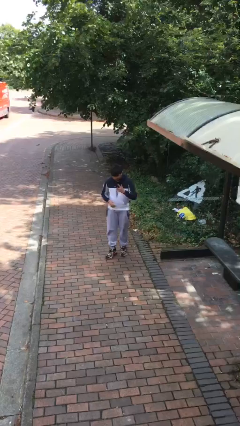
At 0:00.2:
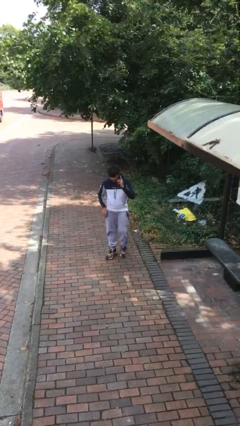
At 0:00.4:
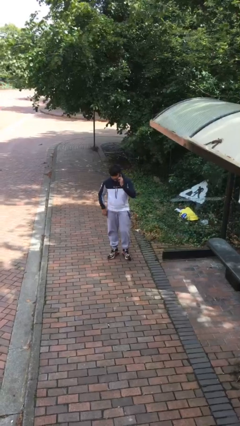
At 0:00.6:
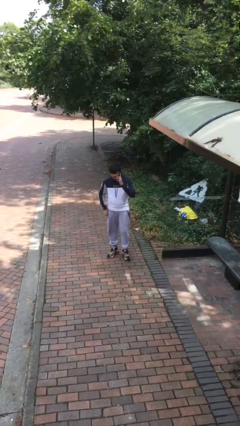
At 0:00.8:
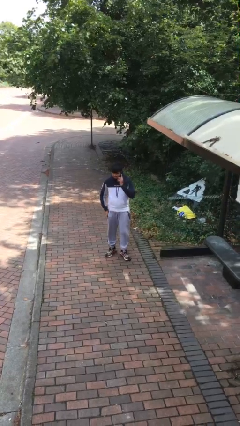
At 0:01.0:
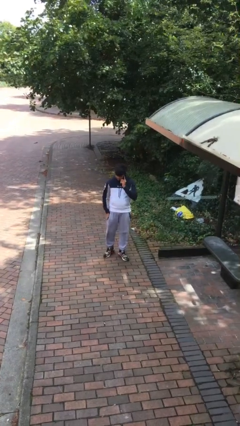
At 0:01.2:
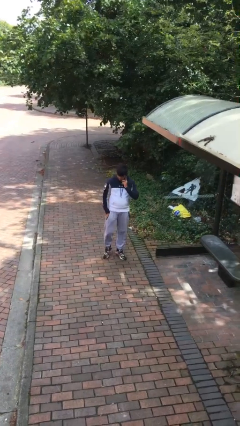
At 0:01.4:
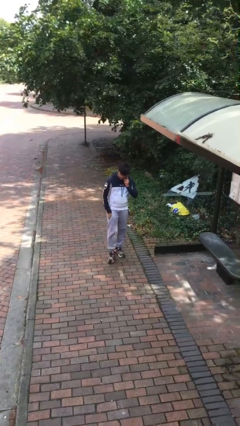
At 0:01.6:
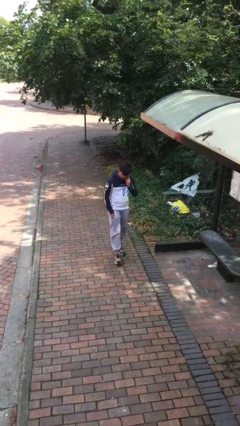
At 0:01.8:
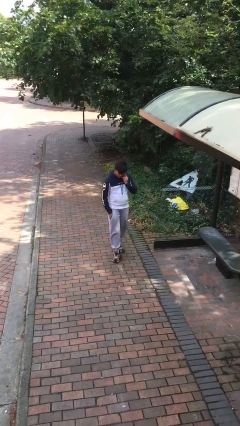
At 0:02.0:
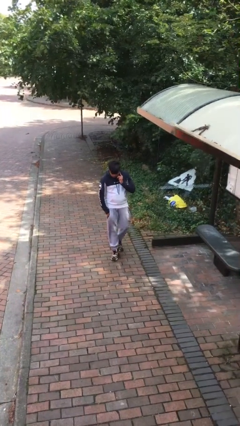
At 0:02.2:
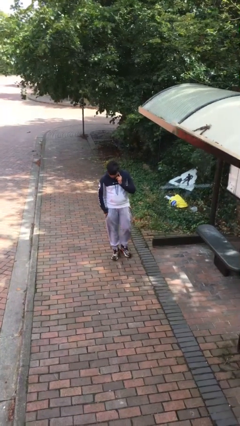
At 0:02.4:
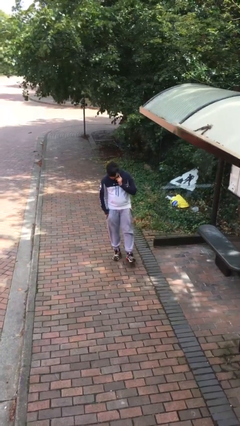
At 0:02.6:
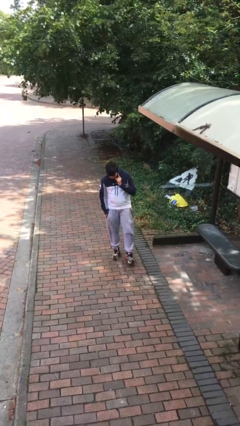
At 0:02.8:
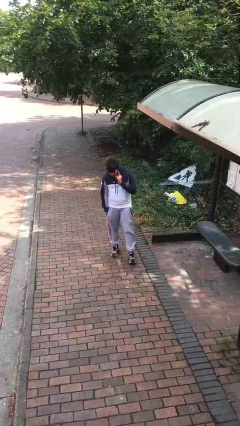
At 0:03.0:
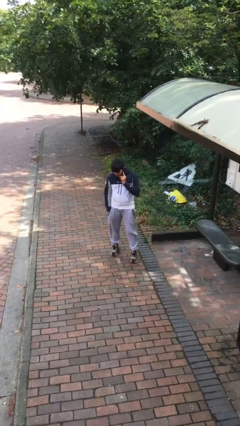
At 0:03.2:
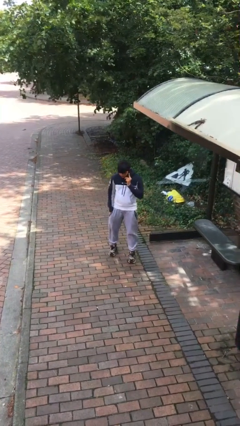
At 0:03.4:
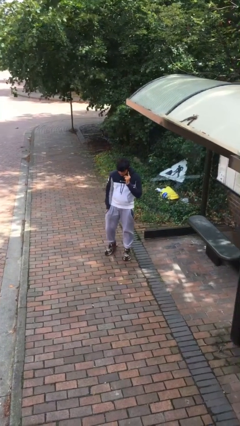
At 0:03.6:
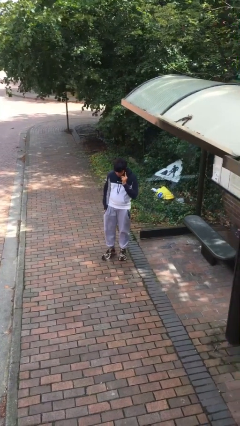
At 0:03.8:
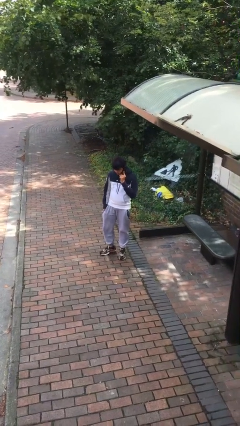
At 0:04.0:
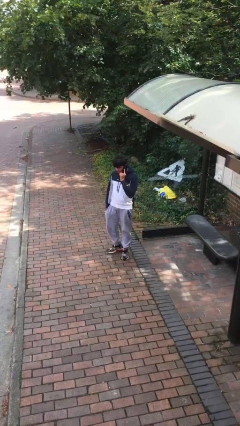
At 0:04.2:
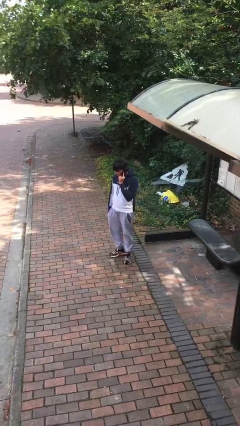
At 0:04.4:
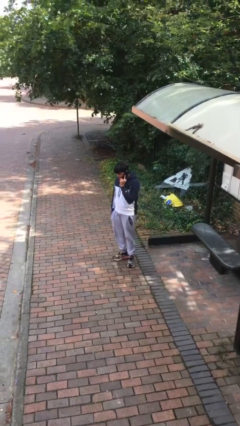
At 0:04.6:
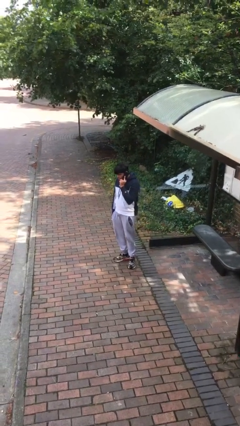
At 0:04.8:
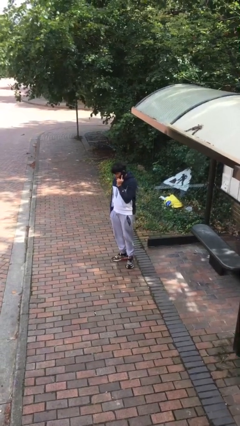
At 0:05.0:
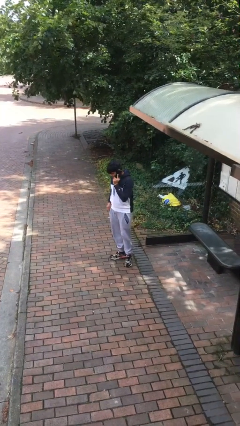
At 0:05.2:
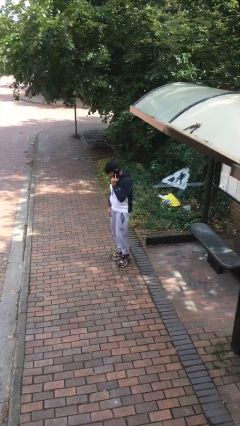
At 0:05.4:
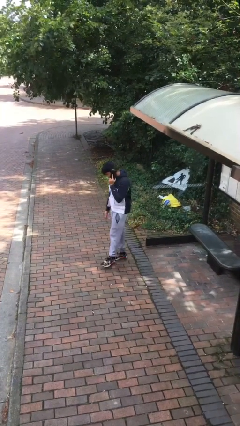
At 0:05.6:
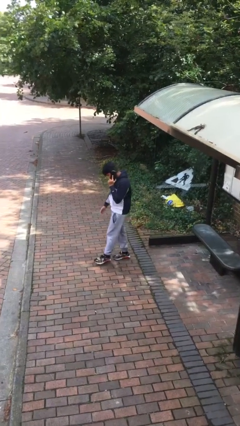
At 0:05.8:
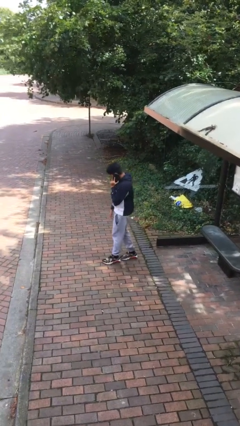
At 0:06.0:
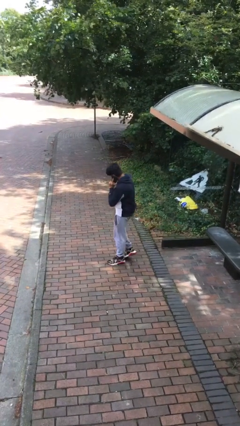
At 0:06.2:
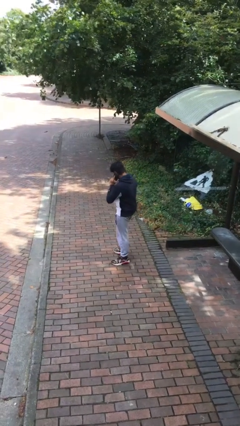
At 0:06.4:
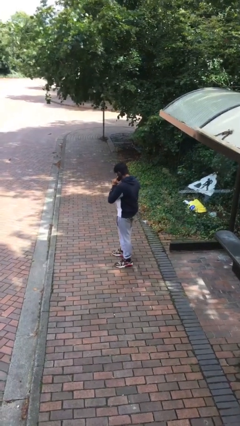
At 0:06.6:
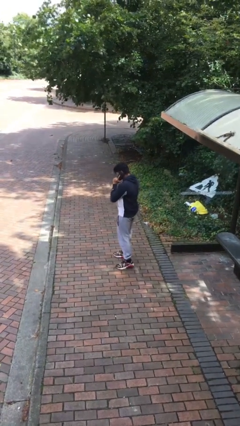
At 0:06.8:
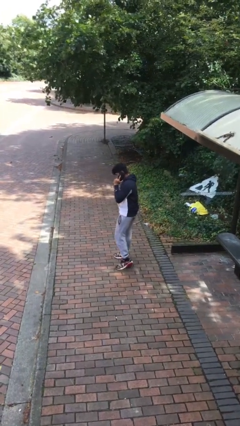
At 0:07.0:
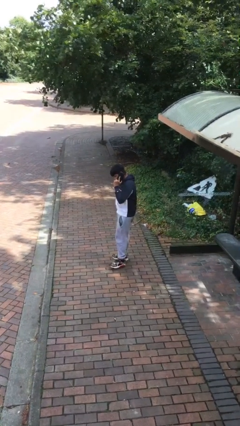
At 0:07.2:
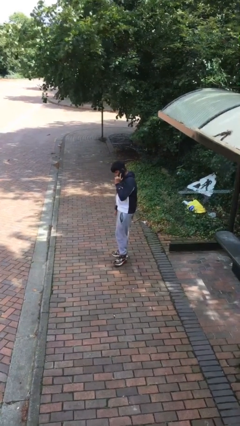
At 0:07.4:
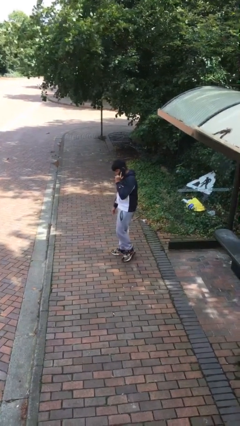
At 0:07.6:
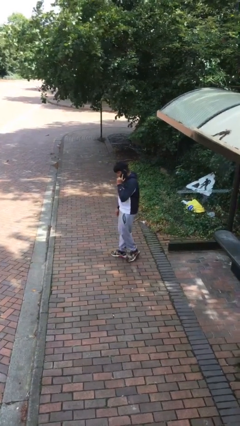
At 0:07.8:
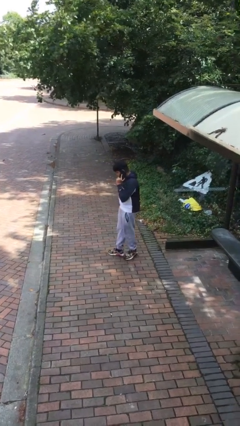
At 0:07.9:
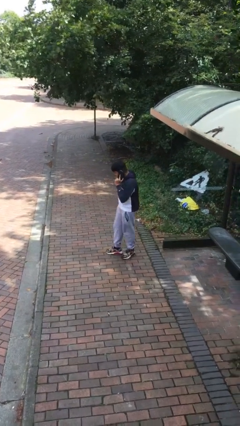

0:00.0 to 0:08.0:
person talks on phone

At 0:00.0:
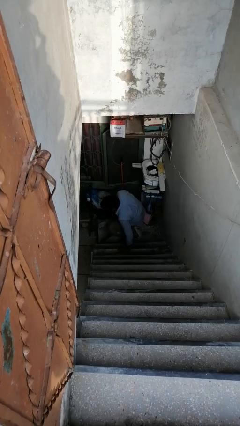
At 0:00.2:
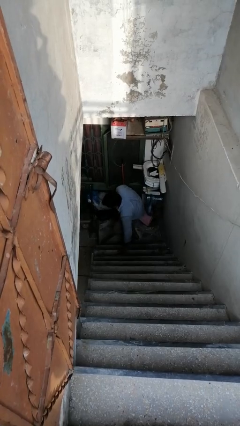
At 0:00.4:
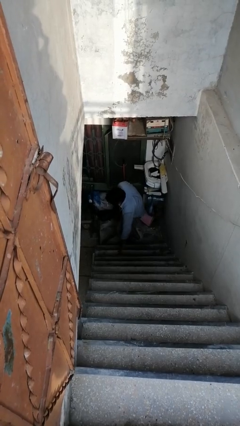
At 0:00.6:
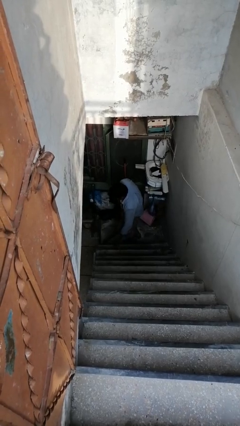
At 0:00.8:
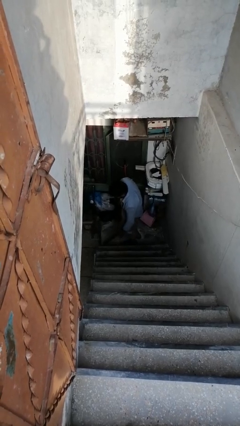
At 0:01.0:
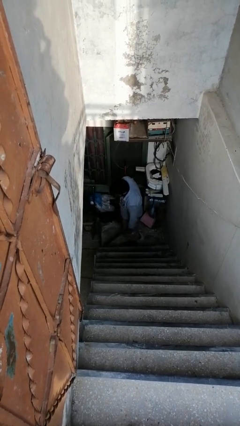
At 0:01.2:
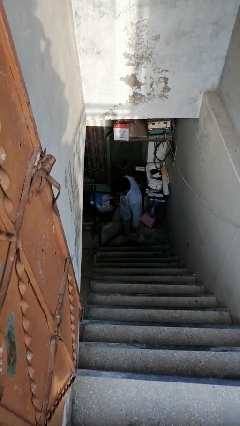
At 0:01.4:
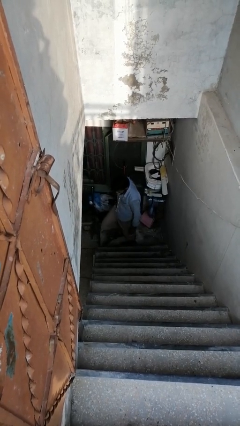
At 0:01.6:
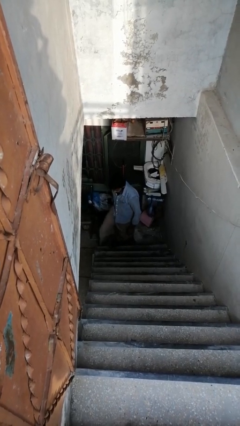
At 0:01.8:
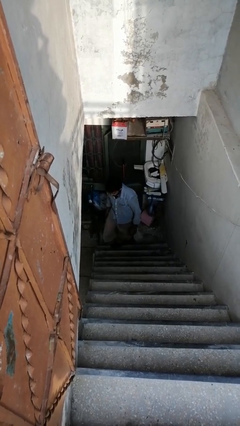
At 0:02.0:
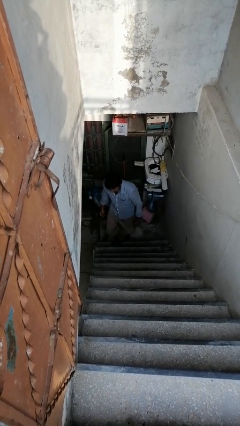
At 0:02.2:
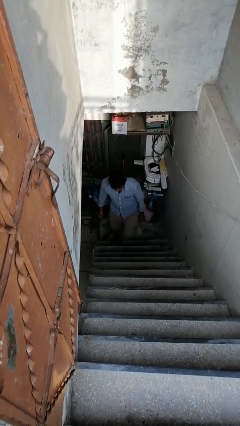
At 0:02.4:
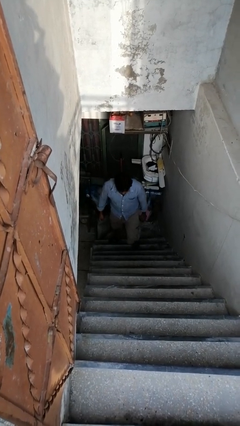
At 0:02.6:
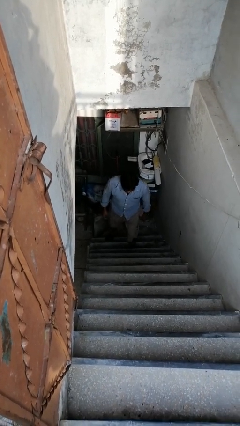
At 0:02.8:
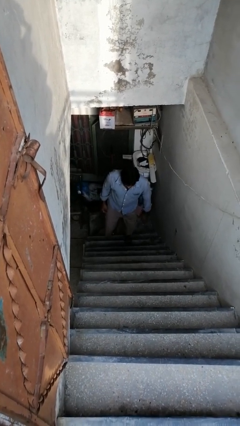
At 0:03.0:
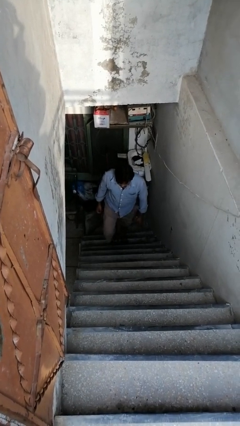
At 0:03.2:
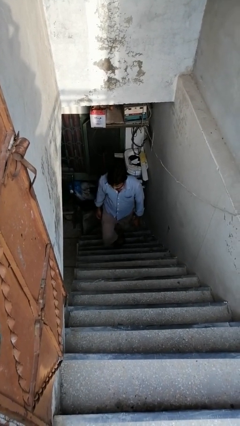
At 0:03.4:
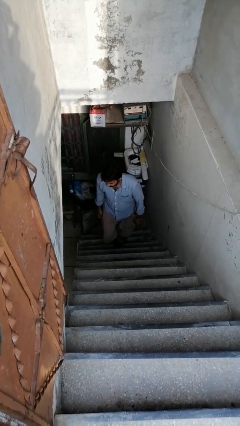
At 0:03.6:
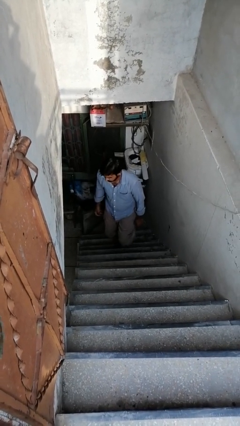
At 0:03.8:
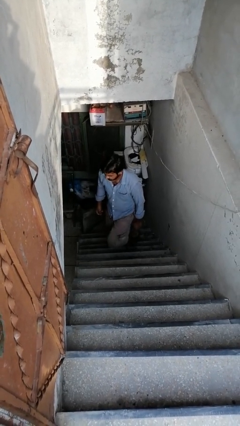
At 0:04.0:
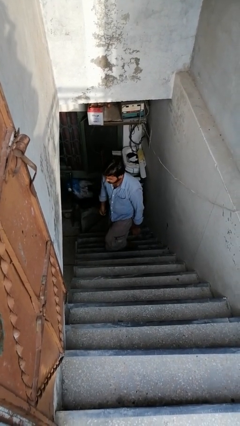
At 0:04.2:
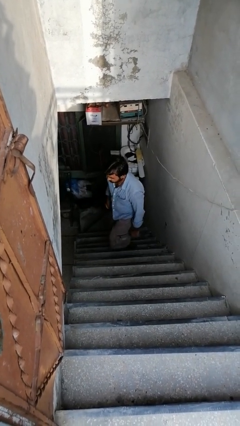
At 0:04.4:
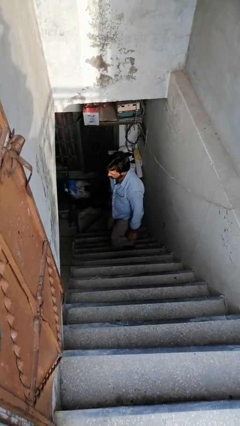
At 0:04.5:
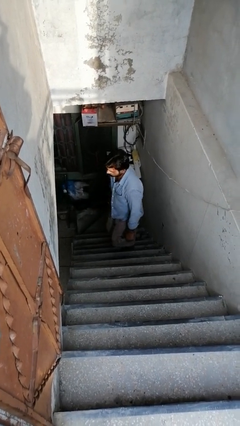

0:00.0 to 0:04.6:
person climbs up stairs

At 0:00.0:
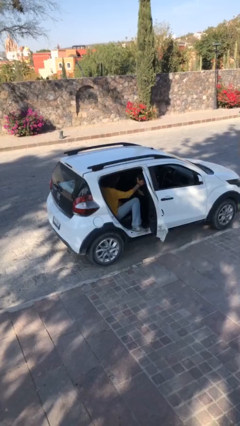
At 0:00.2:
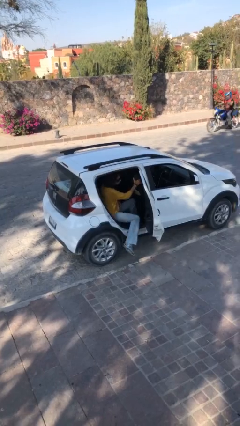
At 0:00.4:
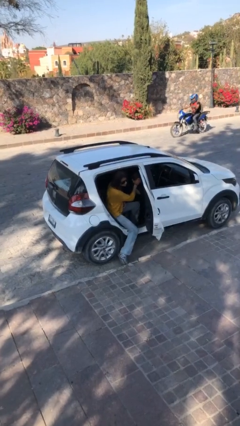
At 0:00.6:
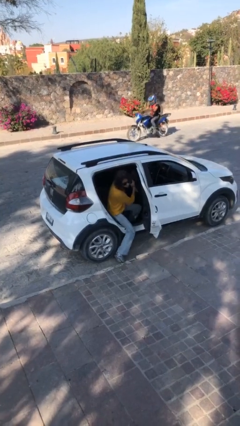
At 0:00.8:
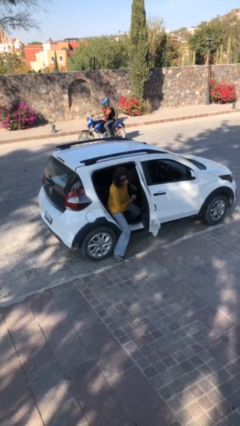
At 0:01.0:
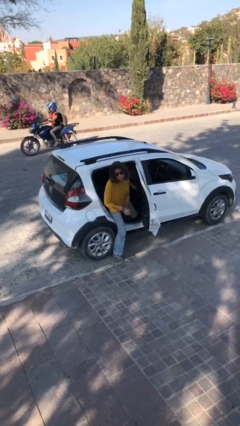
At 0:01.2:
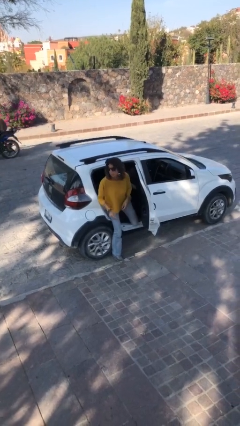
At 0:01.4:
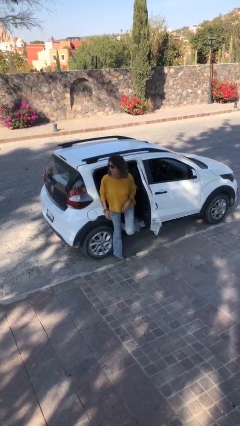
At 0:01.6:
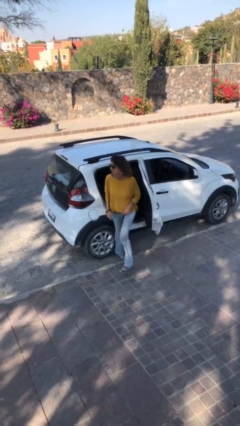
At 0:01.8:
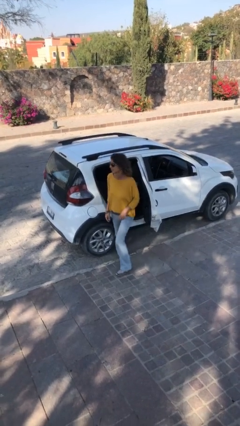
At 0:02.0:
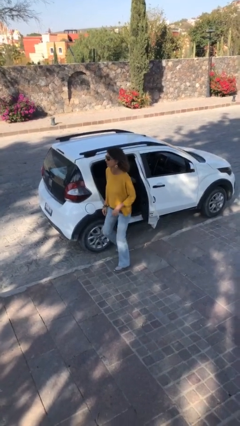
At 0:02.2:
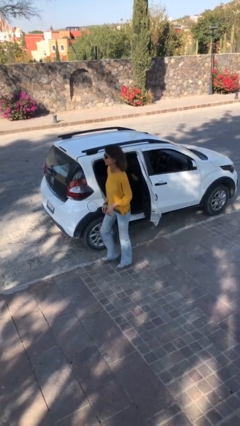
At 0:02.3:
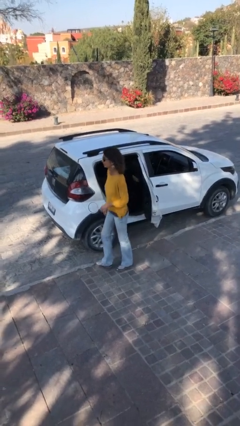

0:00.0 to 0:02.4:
person exits car

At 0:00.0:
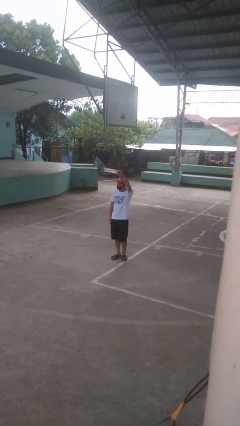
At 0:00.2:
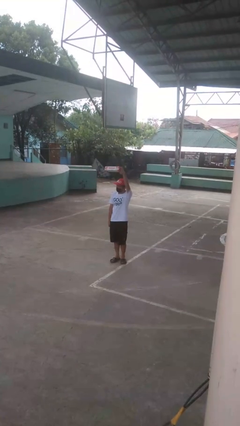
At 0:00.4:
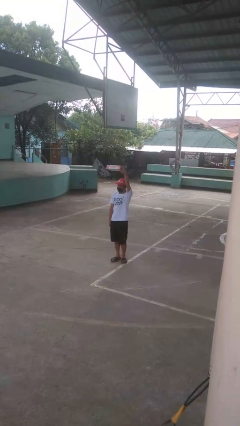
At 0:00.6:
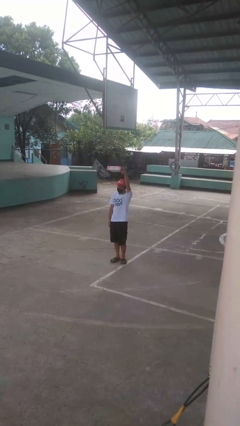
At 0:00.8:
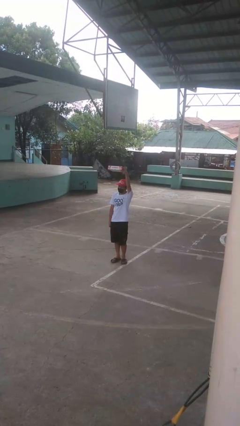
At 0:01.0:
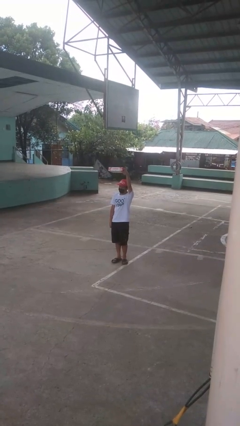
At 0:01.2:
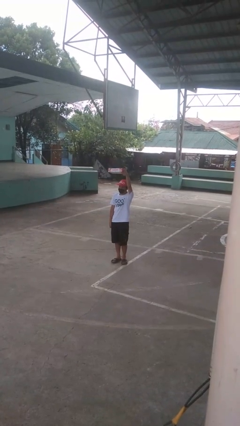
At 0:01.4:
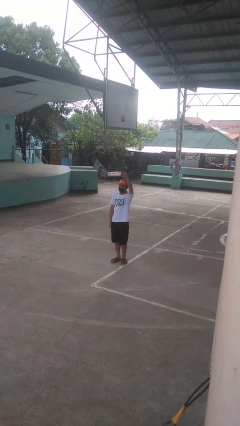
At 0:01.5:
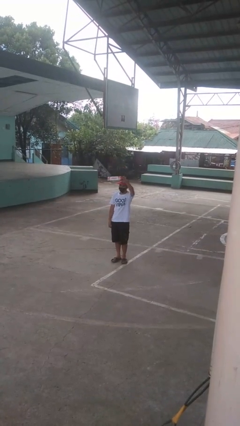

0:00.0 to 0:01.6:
person holds object above head

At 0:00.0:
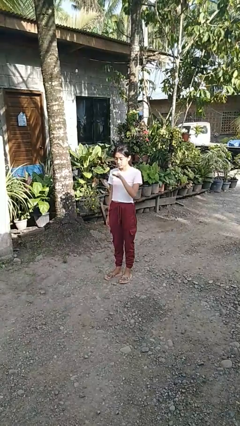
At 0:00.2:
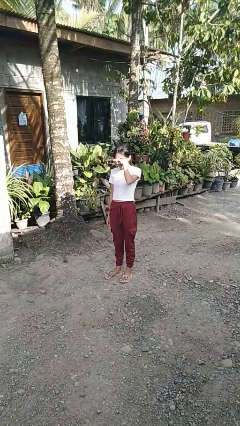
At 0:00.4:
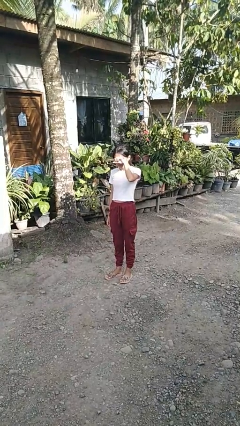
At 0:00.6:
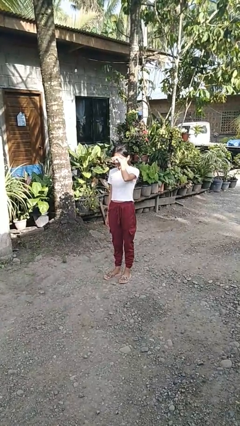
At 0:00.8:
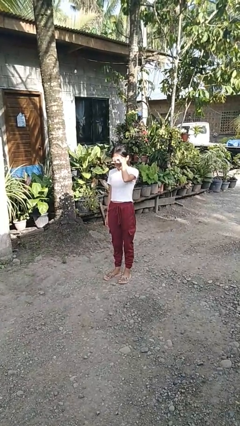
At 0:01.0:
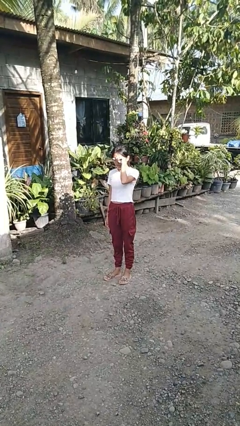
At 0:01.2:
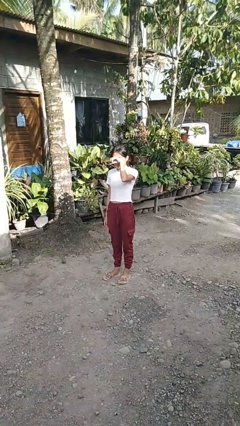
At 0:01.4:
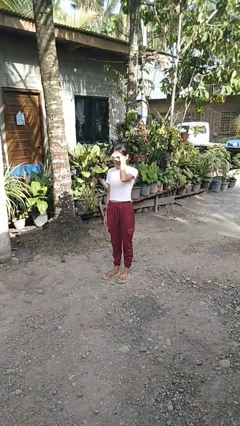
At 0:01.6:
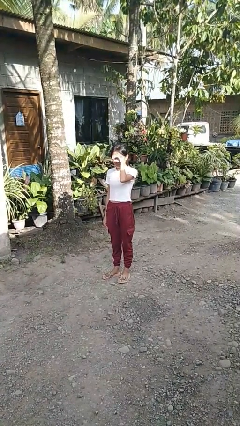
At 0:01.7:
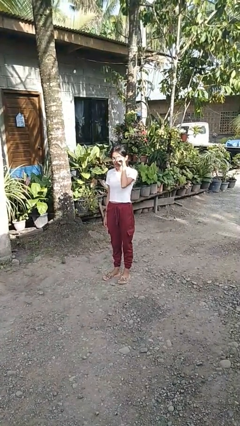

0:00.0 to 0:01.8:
person rubs eyes
